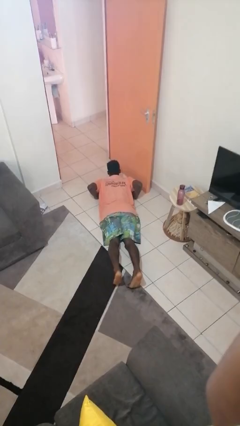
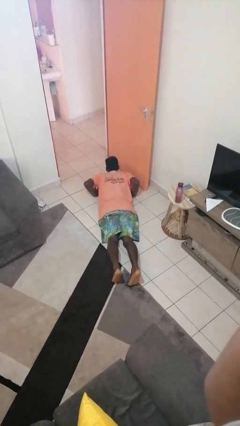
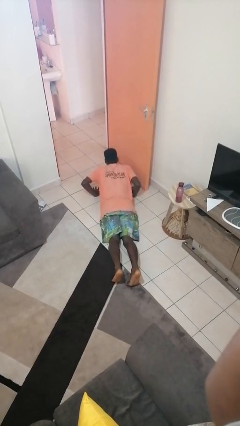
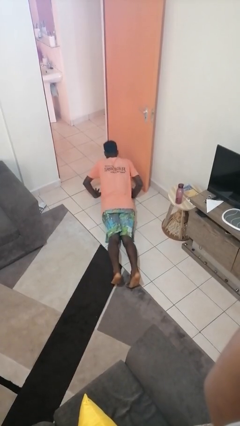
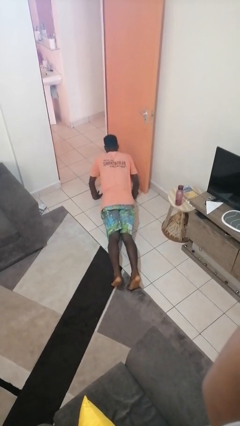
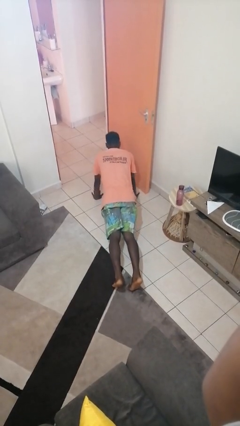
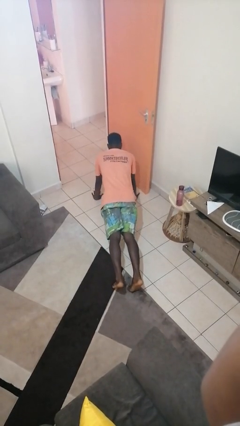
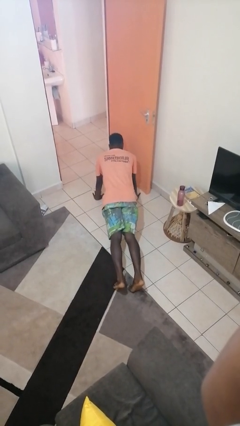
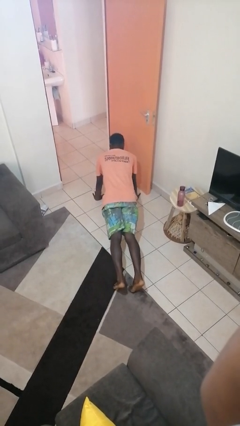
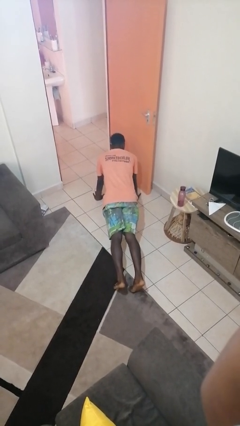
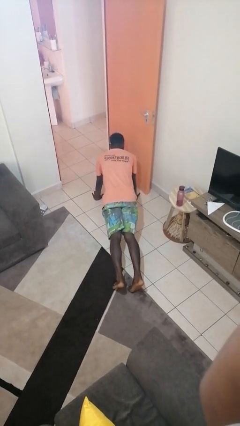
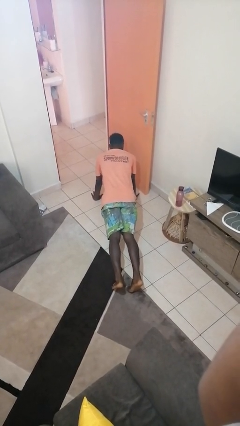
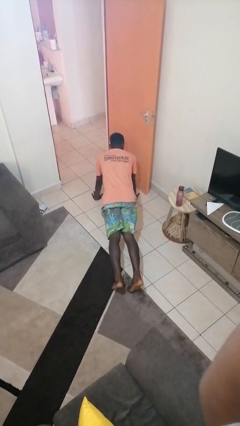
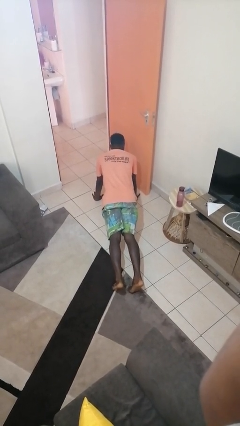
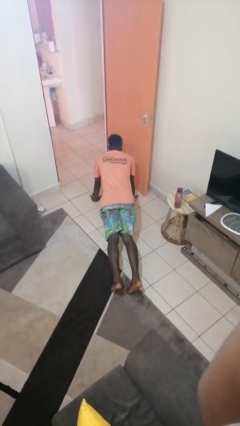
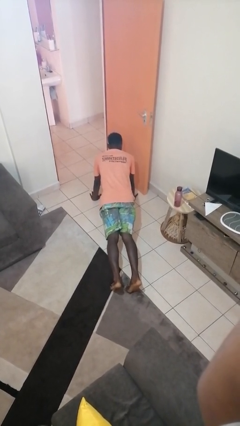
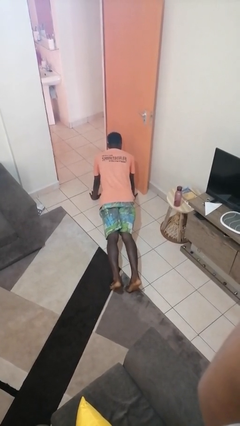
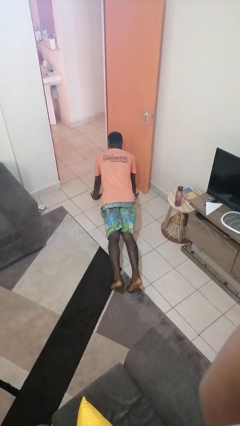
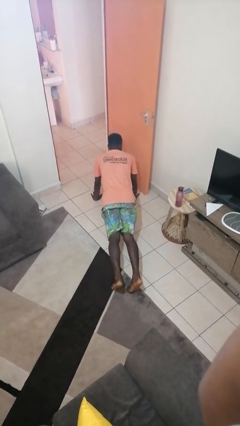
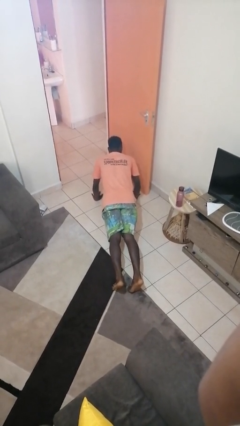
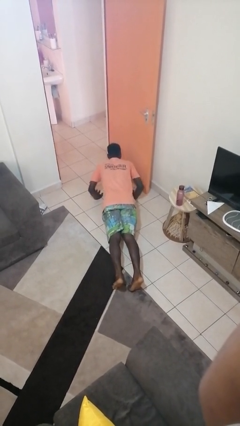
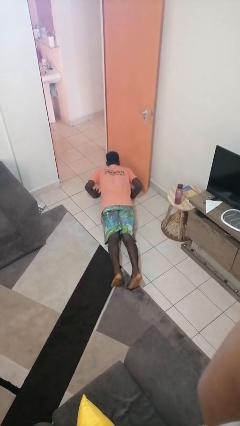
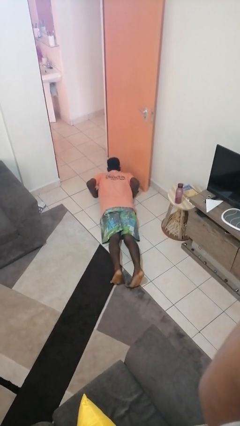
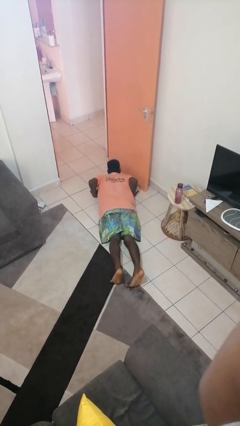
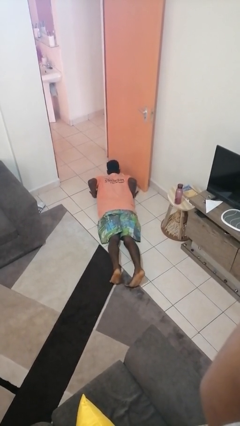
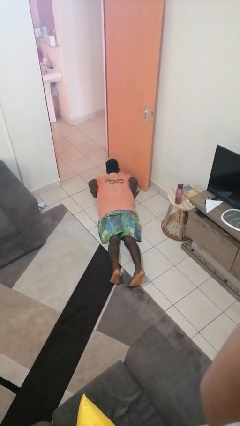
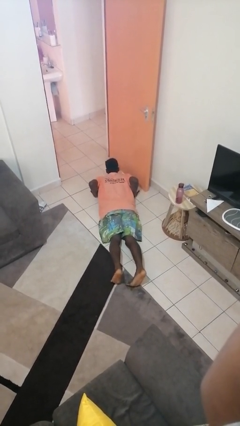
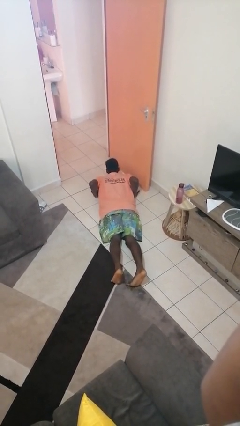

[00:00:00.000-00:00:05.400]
person exercises with pushup

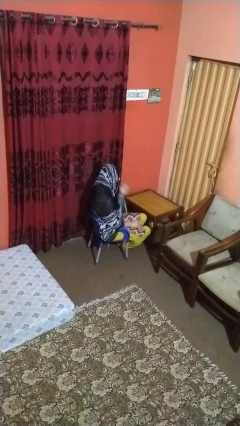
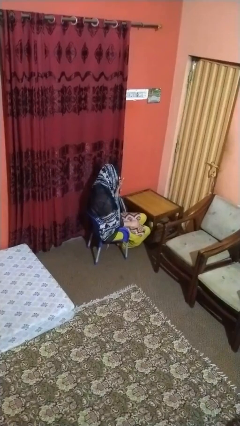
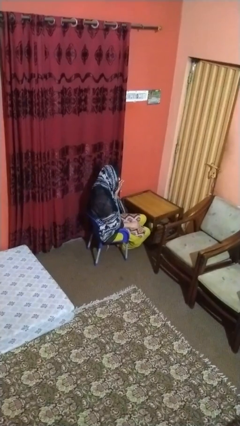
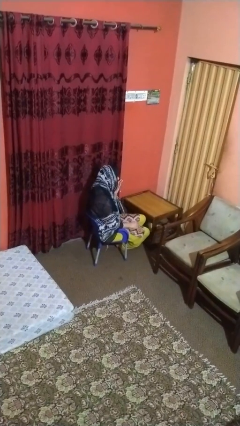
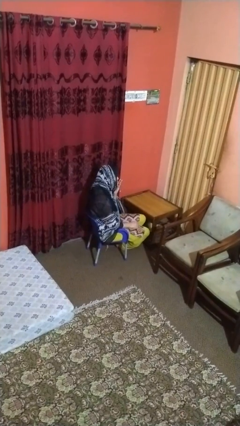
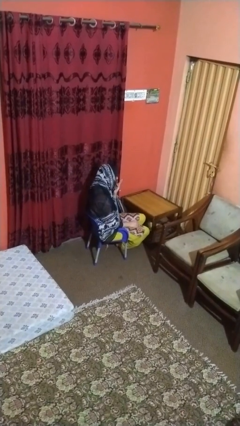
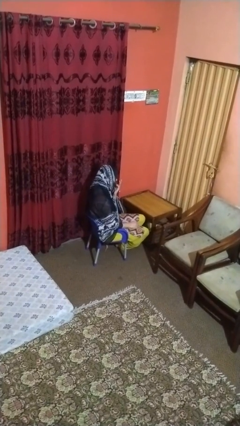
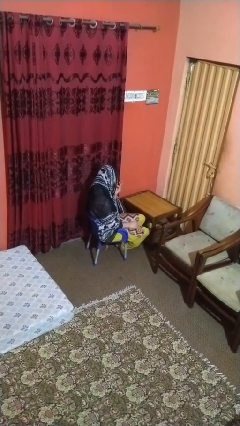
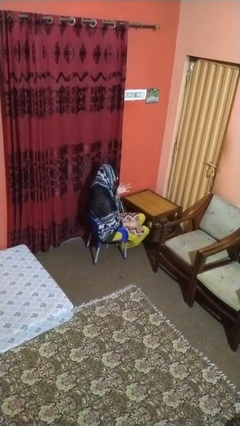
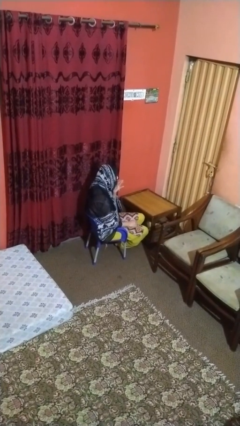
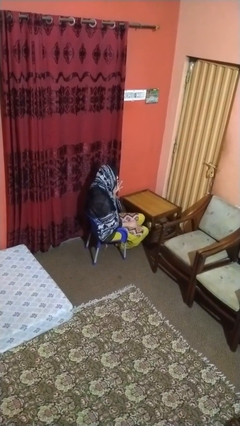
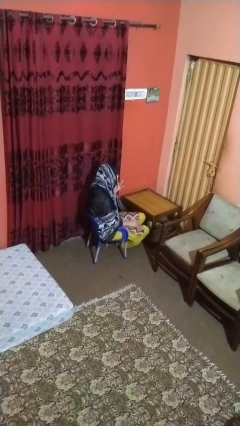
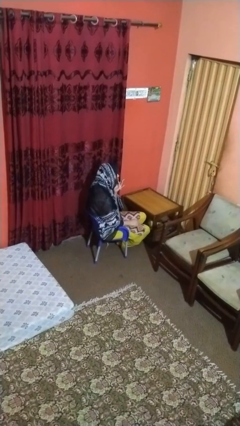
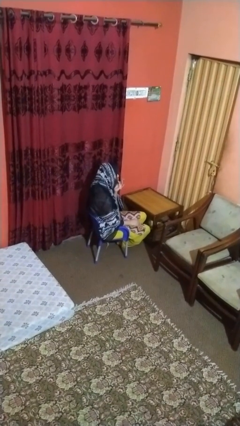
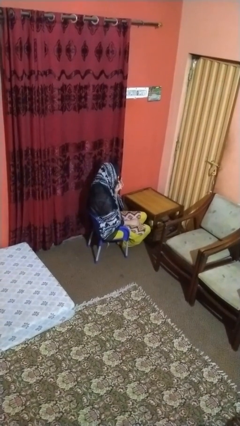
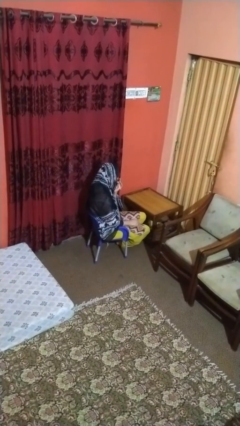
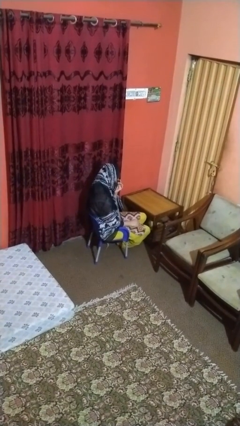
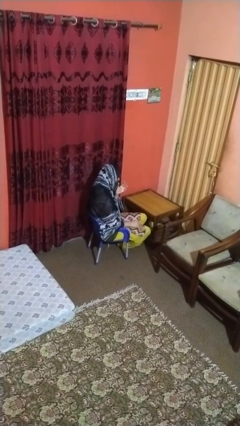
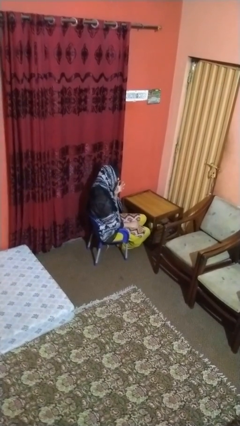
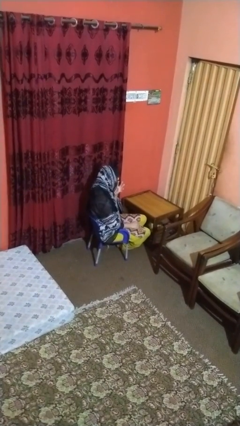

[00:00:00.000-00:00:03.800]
person licks fingers

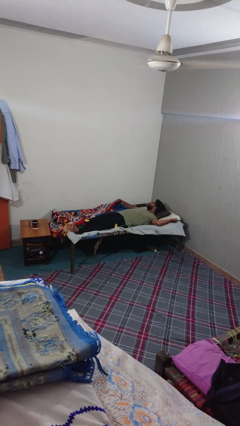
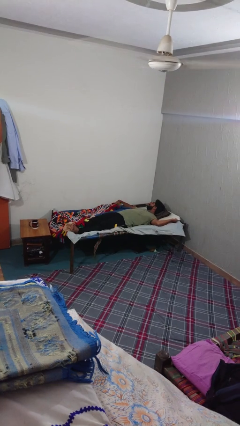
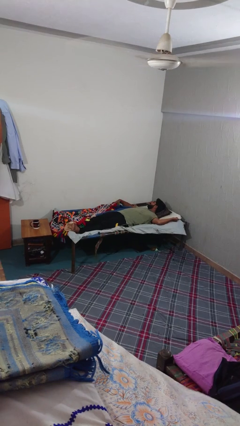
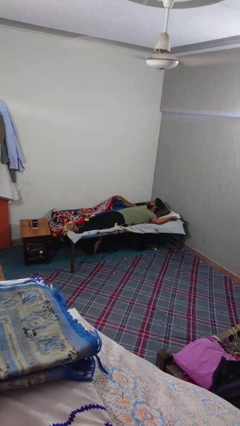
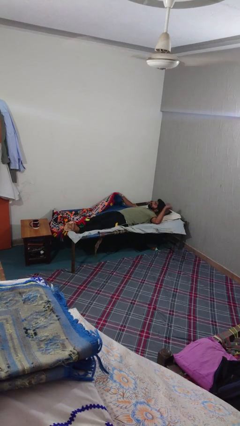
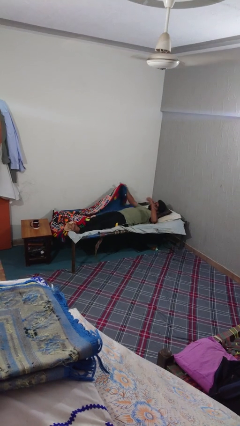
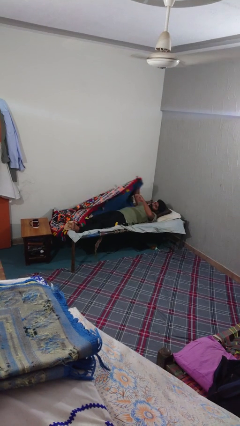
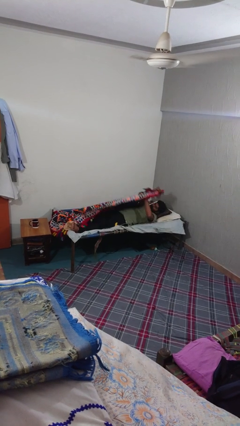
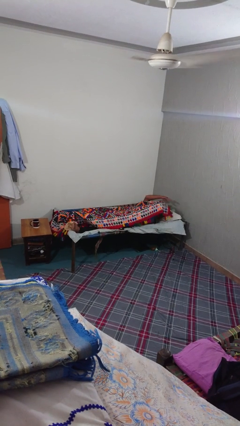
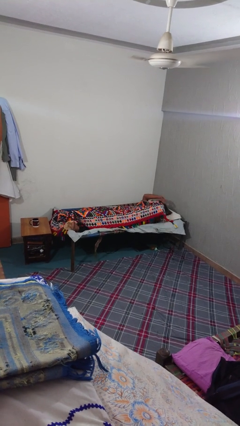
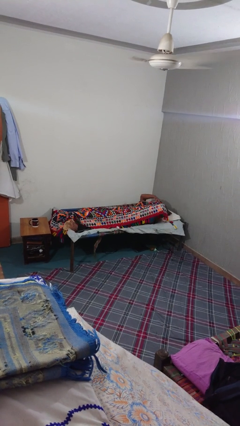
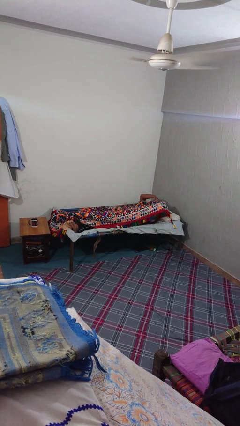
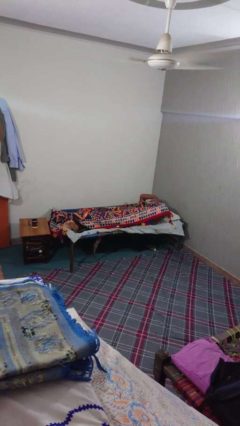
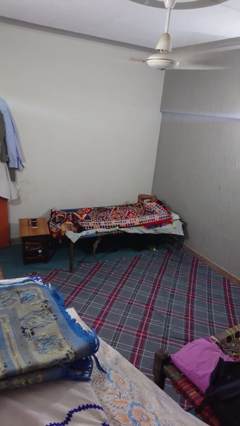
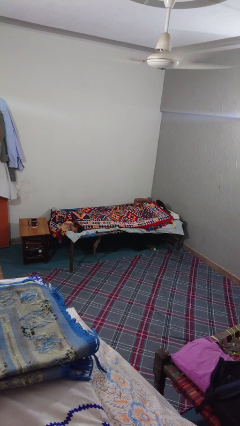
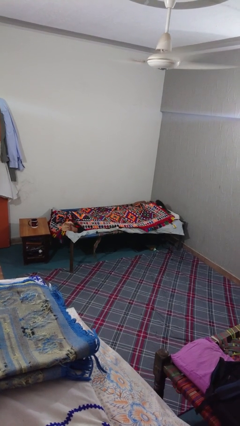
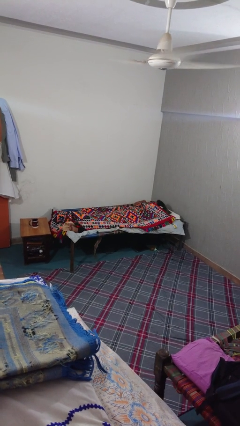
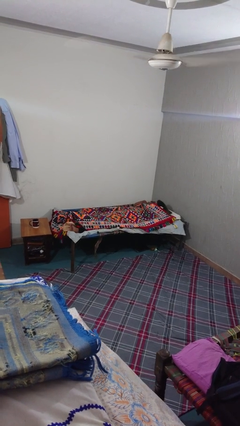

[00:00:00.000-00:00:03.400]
person covers with blanket

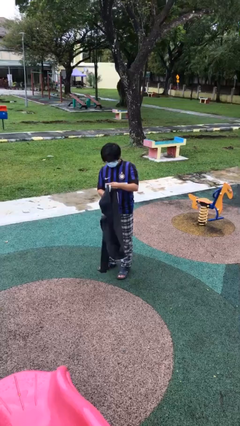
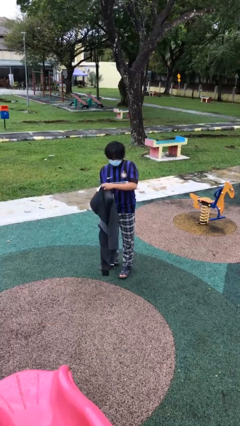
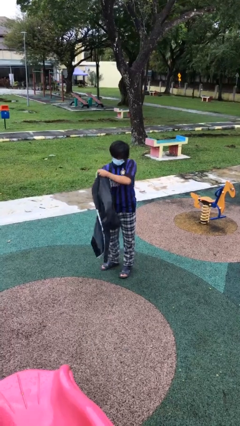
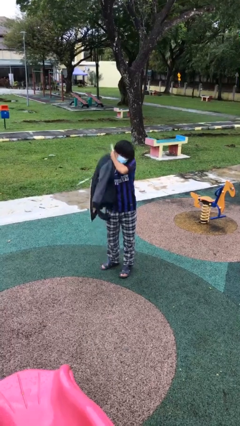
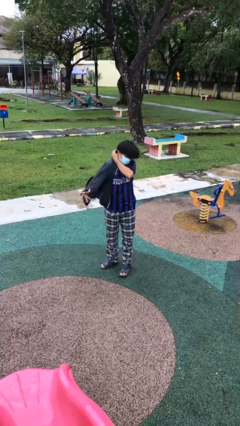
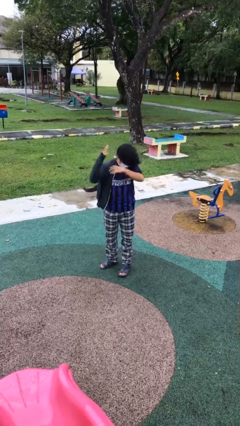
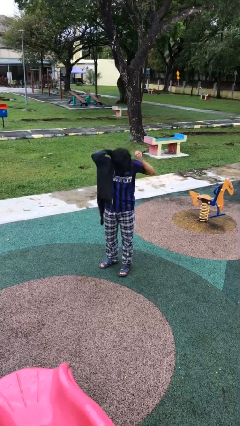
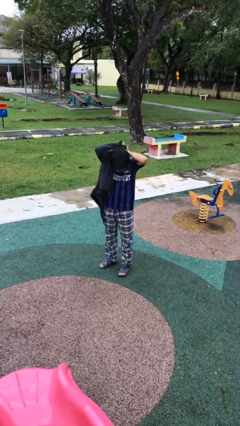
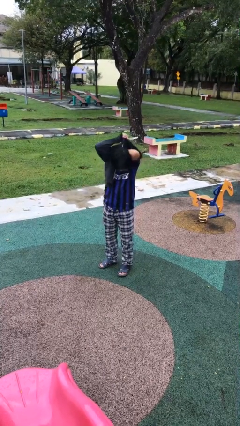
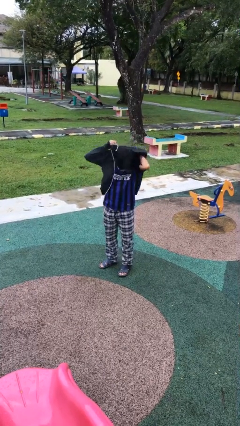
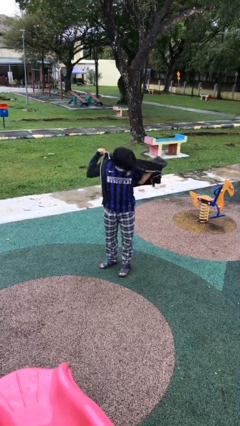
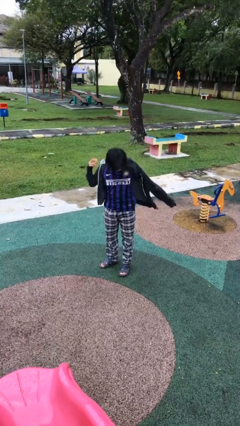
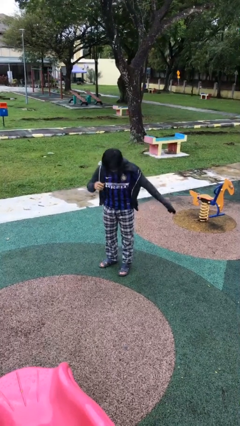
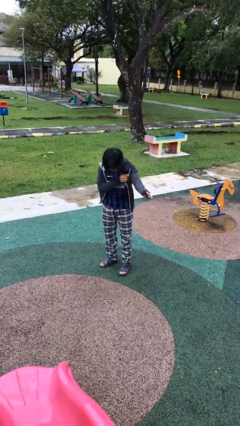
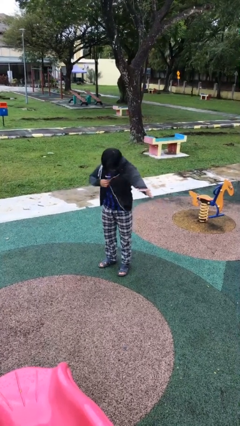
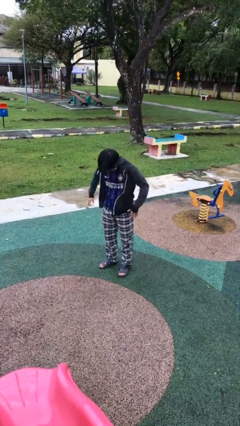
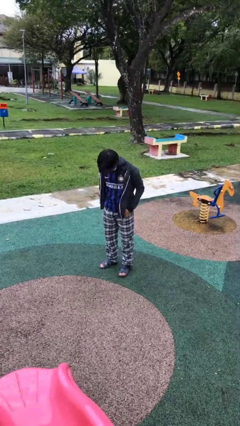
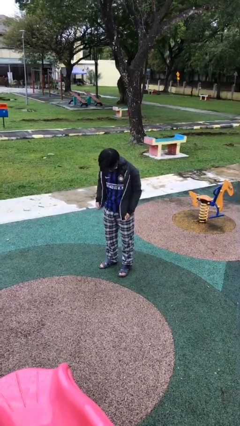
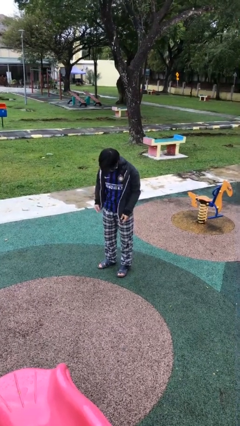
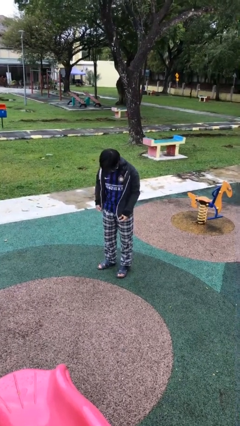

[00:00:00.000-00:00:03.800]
person puts on jacket

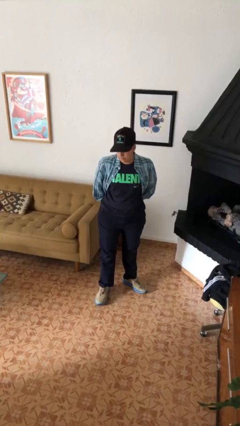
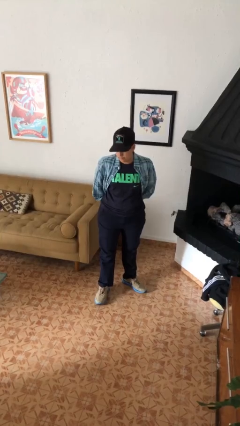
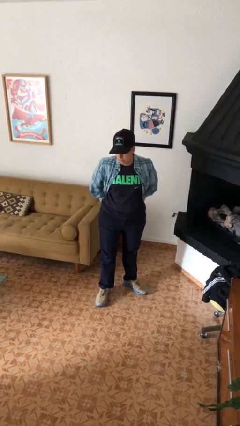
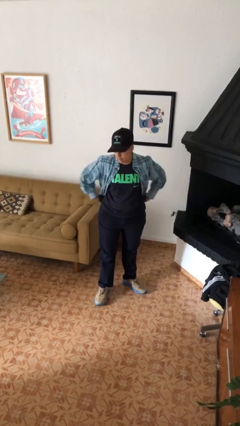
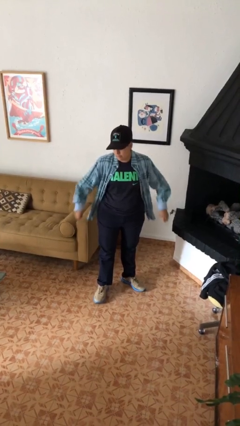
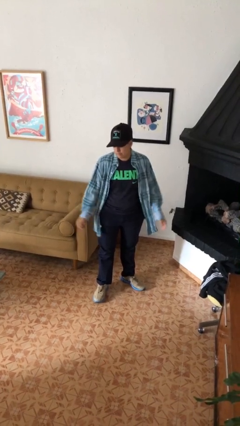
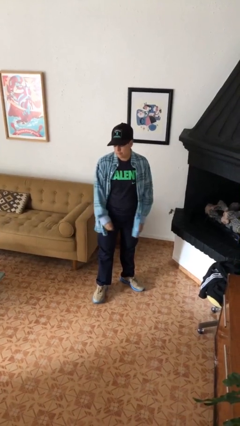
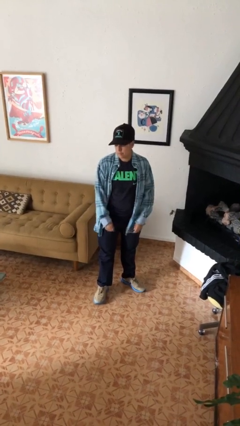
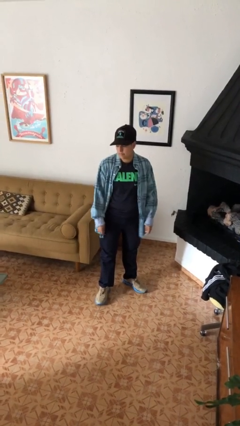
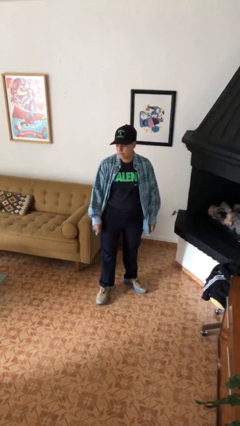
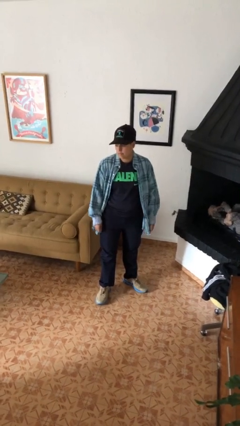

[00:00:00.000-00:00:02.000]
person puts hands in back pockets
